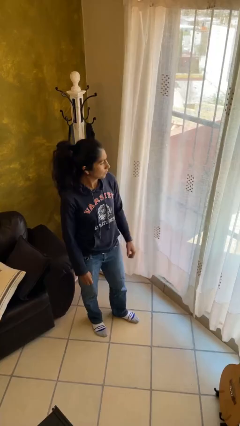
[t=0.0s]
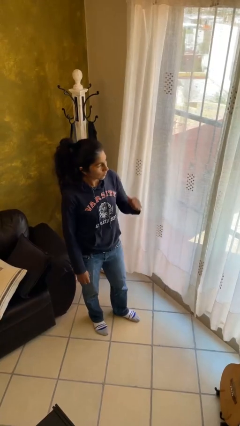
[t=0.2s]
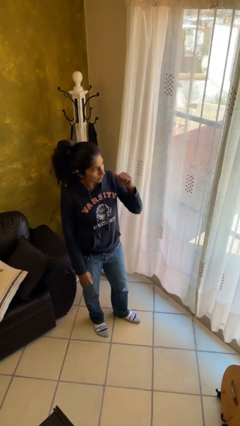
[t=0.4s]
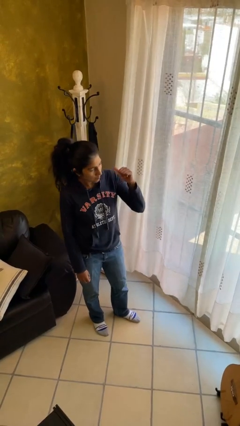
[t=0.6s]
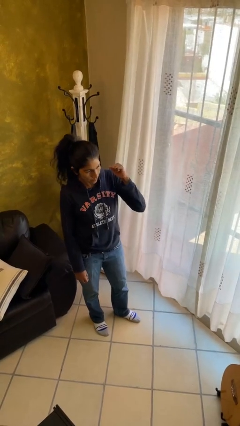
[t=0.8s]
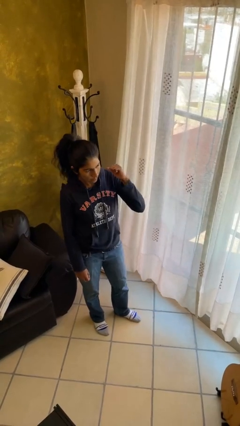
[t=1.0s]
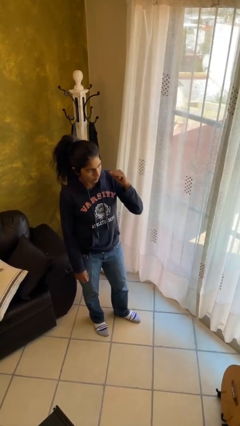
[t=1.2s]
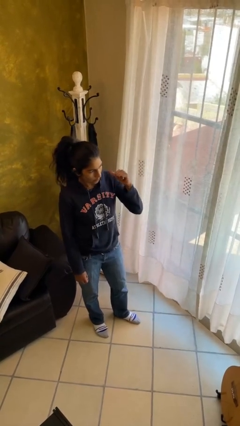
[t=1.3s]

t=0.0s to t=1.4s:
person gestures behind me

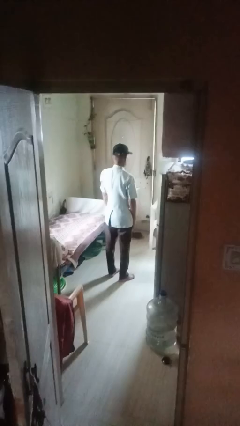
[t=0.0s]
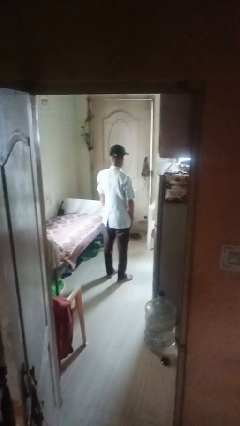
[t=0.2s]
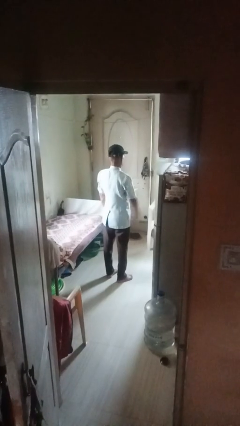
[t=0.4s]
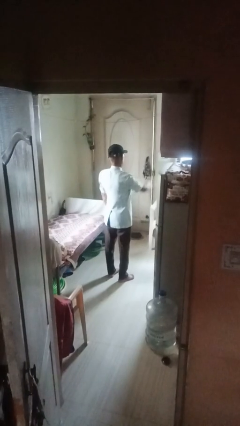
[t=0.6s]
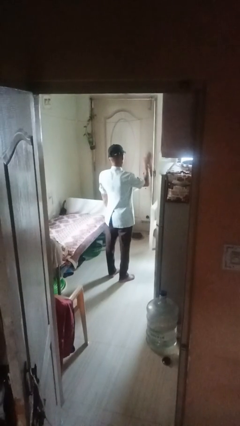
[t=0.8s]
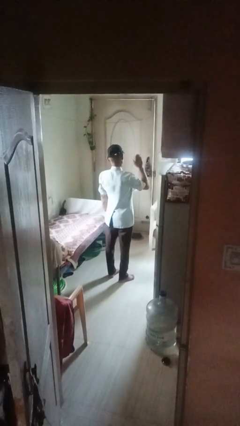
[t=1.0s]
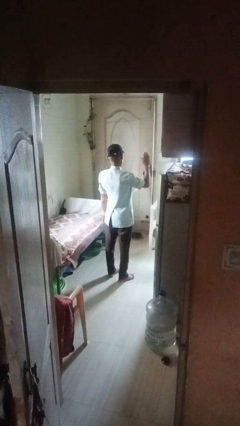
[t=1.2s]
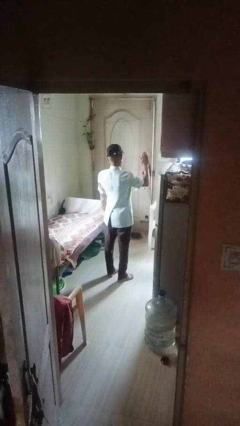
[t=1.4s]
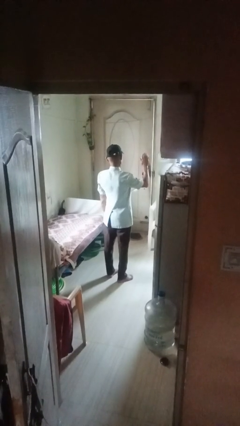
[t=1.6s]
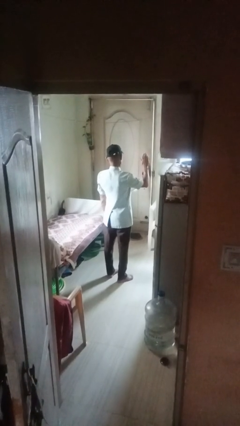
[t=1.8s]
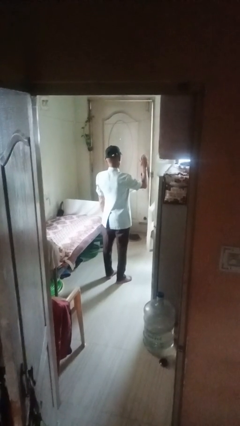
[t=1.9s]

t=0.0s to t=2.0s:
person gestures stop

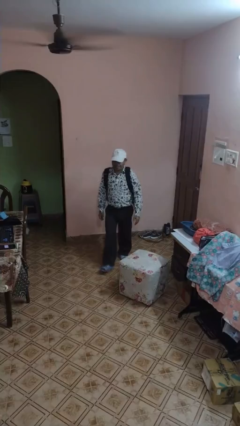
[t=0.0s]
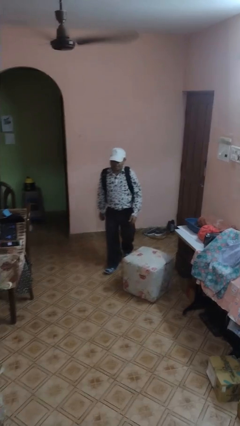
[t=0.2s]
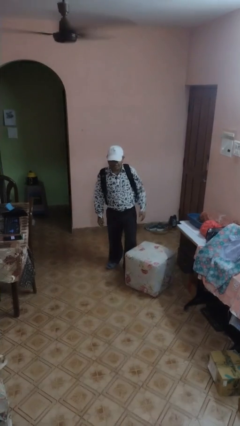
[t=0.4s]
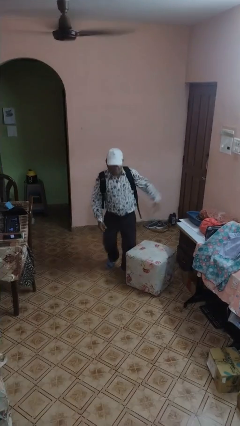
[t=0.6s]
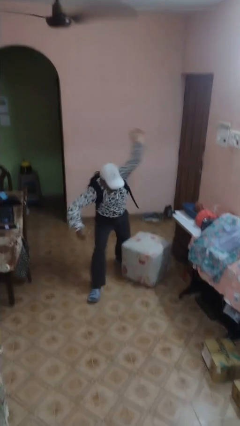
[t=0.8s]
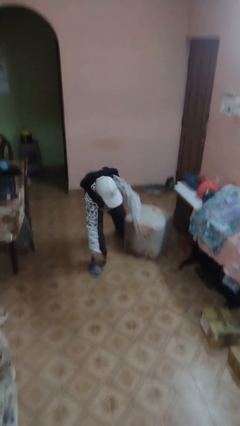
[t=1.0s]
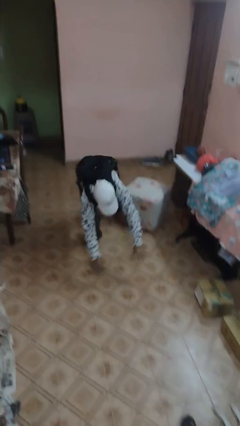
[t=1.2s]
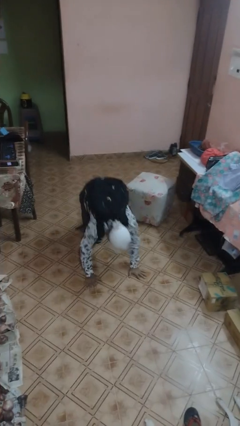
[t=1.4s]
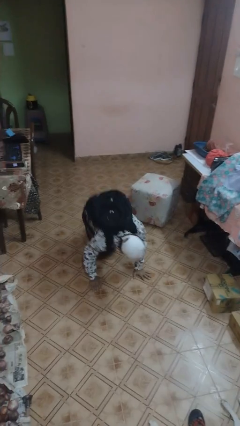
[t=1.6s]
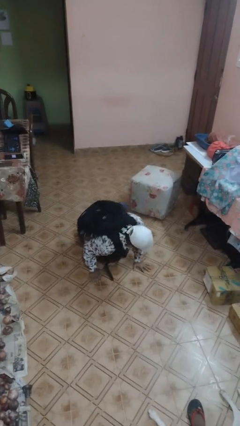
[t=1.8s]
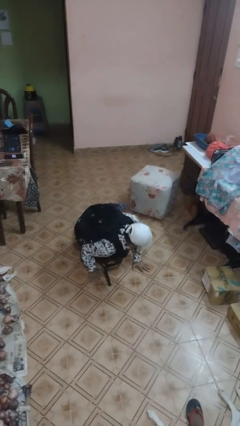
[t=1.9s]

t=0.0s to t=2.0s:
person trips on object on floor

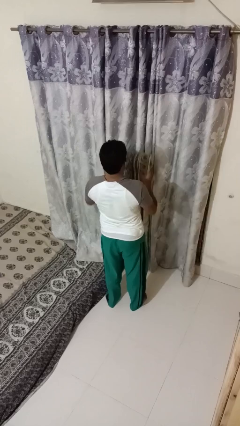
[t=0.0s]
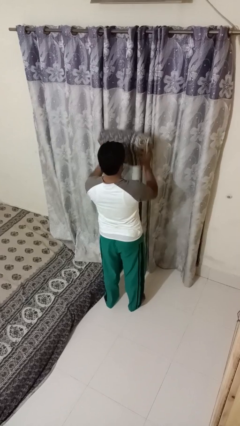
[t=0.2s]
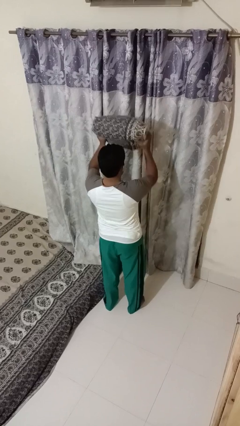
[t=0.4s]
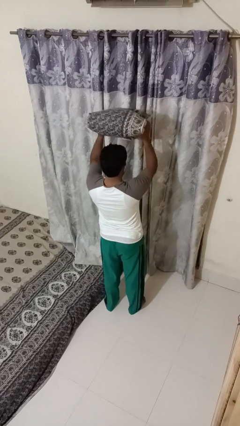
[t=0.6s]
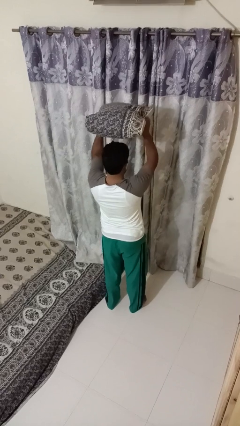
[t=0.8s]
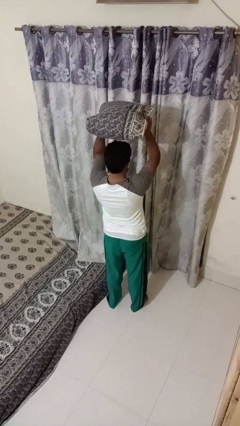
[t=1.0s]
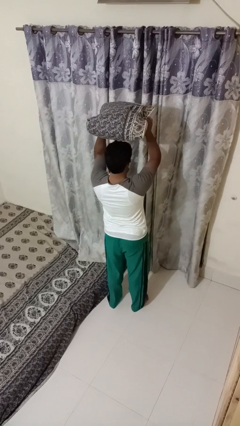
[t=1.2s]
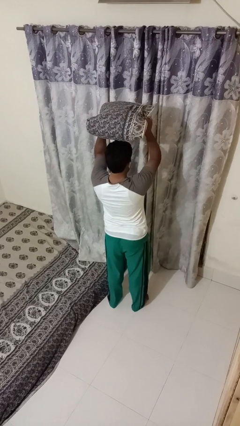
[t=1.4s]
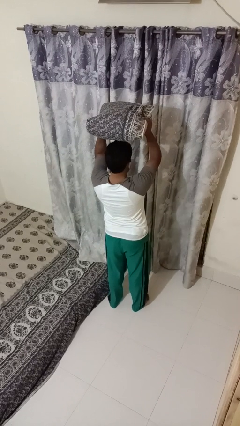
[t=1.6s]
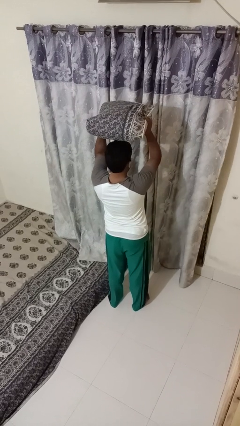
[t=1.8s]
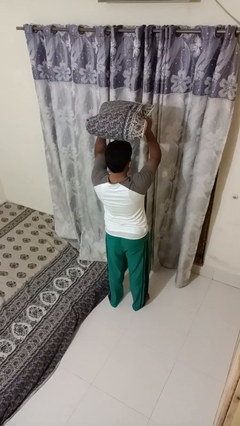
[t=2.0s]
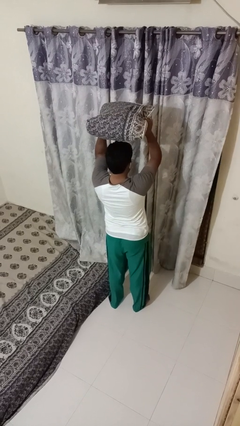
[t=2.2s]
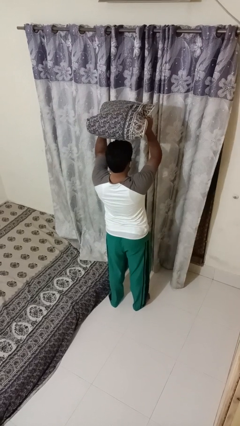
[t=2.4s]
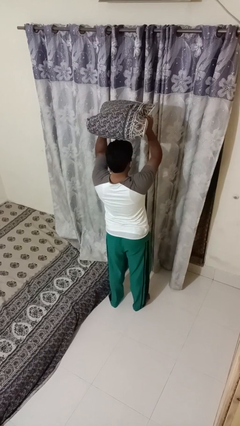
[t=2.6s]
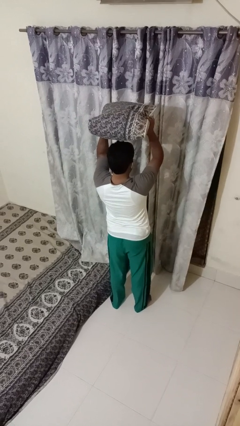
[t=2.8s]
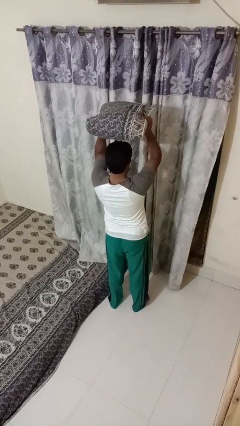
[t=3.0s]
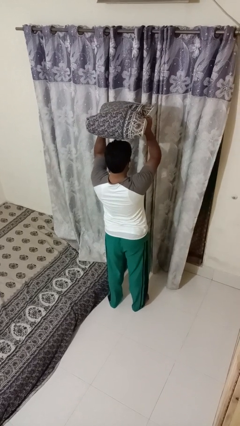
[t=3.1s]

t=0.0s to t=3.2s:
person holds object above head

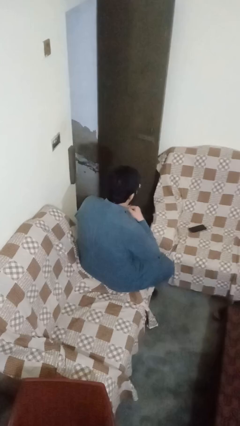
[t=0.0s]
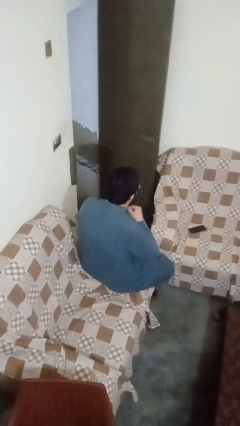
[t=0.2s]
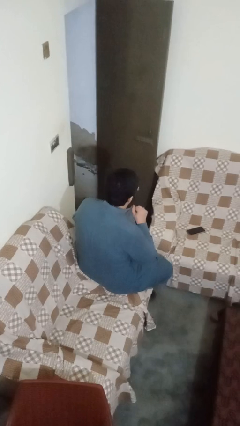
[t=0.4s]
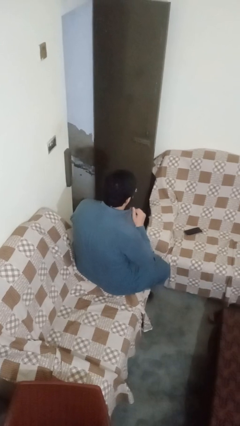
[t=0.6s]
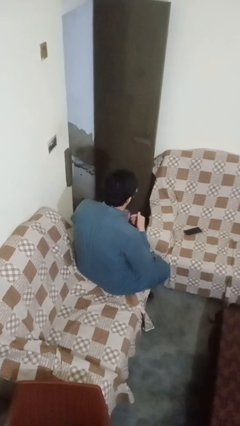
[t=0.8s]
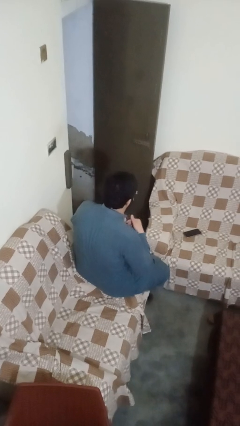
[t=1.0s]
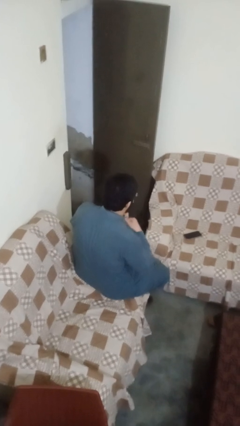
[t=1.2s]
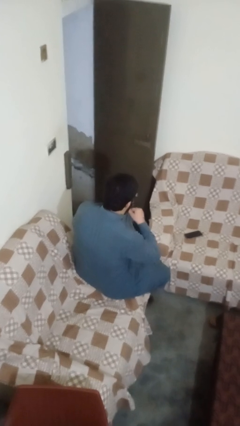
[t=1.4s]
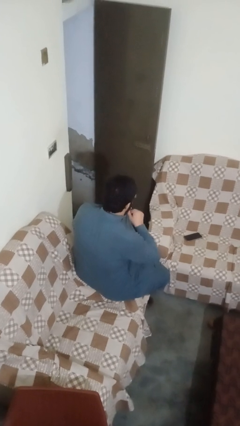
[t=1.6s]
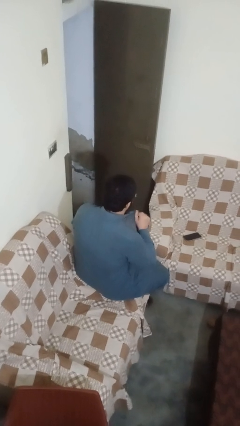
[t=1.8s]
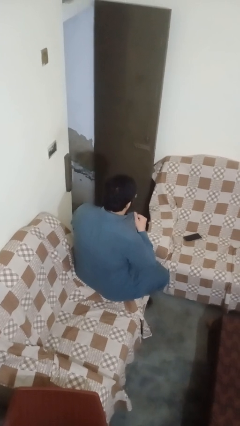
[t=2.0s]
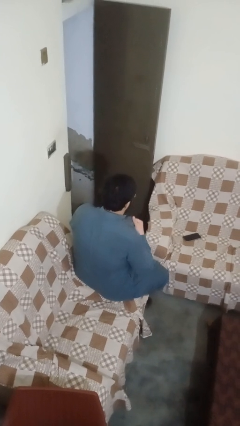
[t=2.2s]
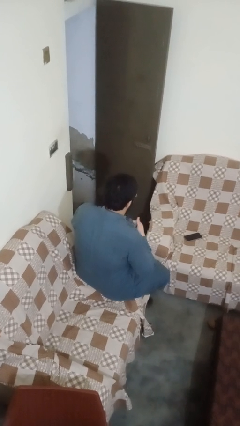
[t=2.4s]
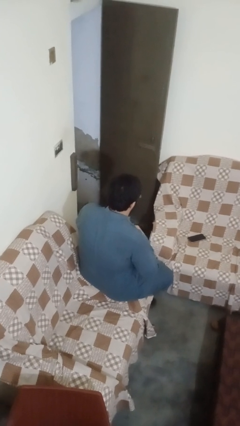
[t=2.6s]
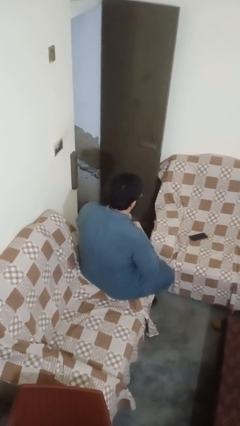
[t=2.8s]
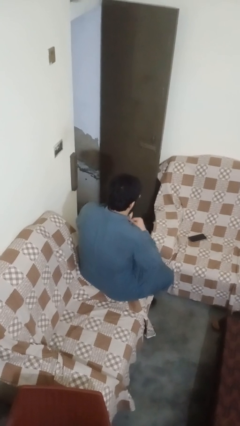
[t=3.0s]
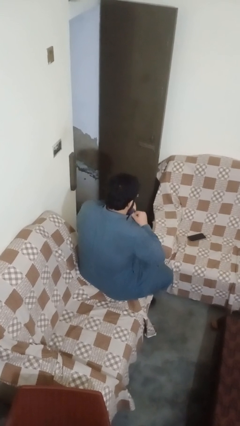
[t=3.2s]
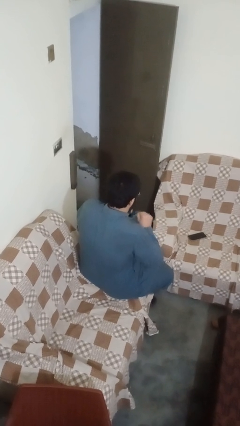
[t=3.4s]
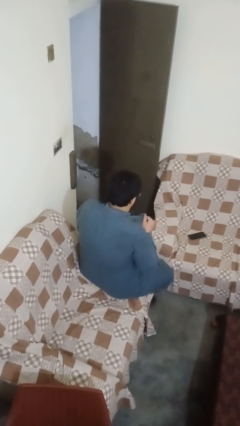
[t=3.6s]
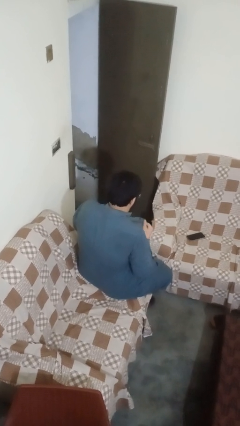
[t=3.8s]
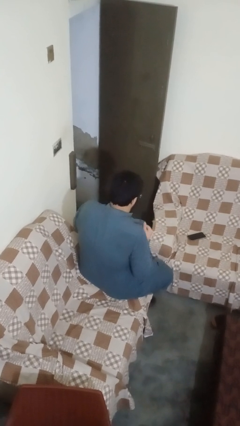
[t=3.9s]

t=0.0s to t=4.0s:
person unbuttons shirt

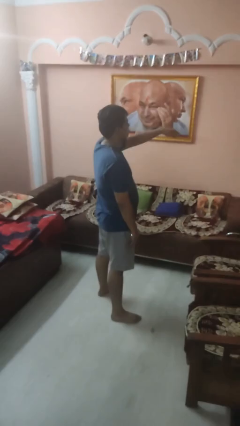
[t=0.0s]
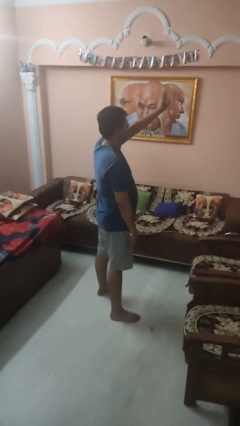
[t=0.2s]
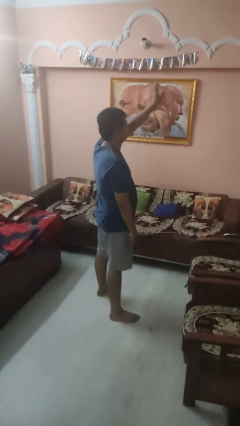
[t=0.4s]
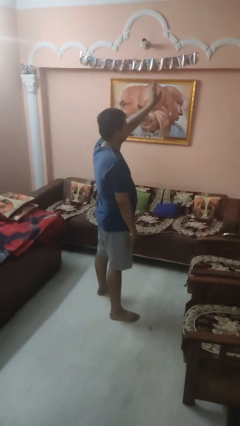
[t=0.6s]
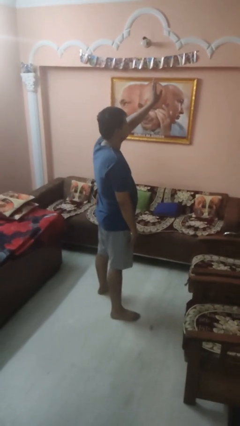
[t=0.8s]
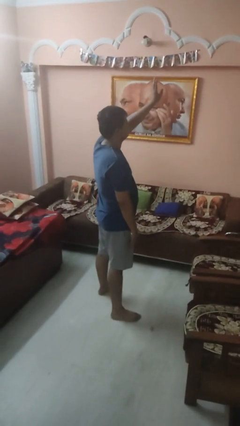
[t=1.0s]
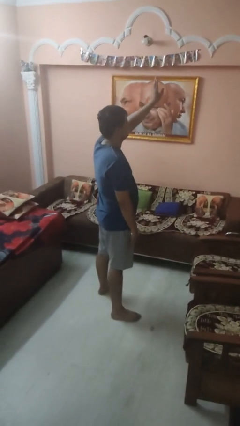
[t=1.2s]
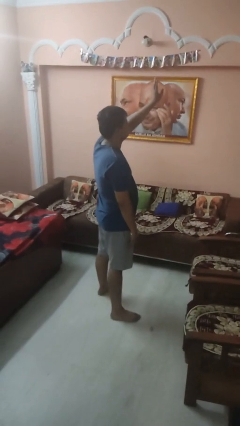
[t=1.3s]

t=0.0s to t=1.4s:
person gestures swipe up

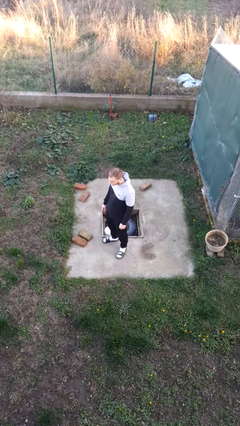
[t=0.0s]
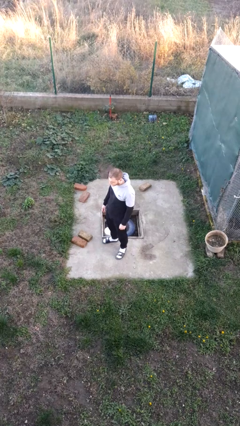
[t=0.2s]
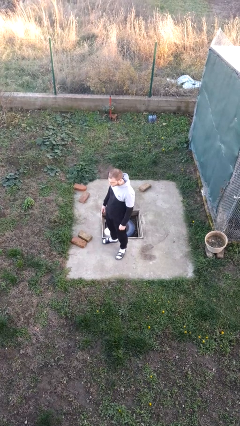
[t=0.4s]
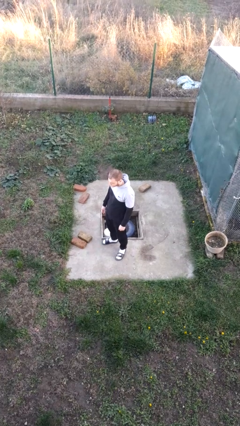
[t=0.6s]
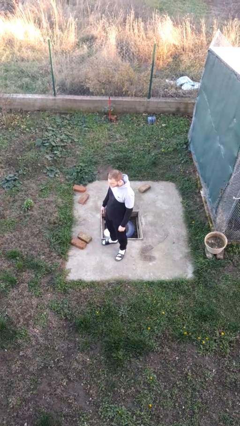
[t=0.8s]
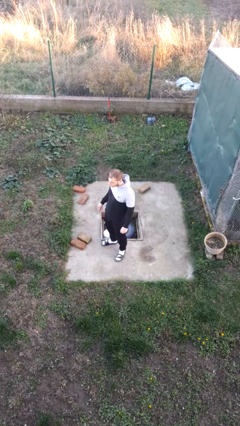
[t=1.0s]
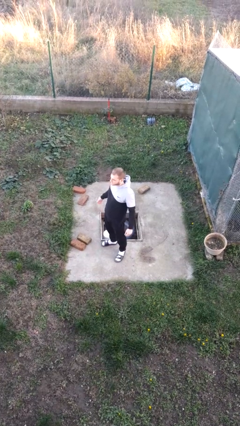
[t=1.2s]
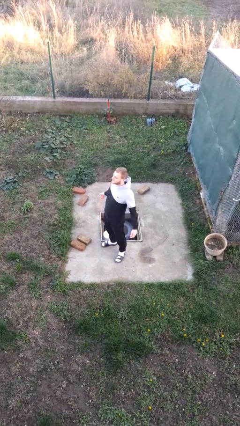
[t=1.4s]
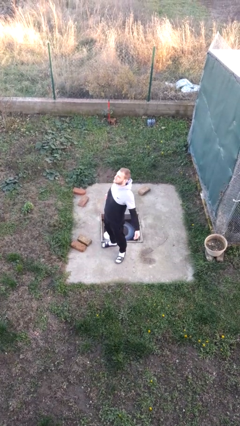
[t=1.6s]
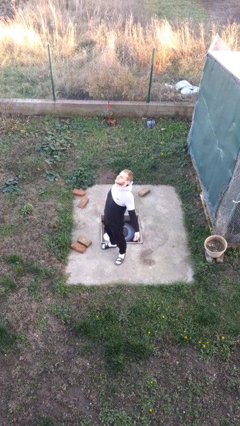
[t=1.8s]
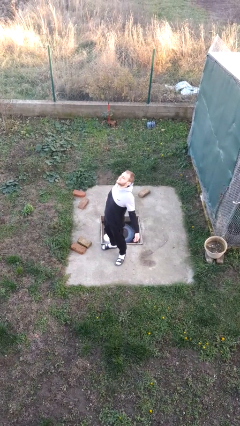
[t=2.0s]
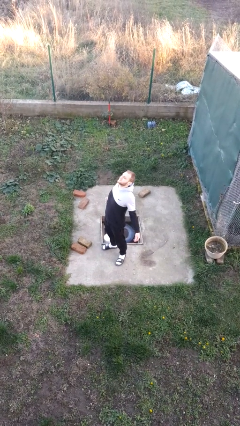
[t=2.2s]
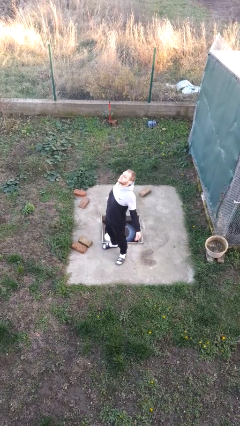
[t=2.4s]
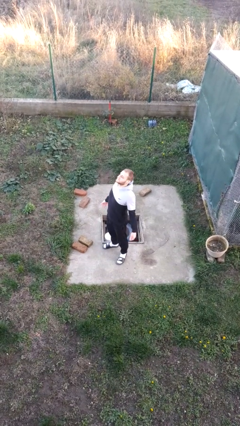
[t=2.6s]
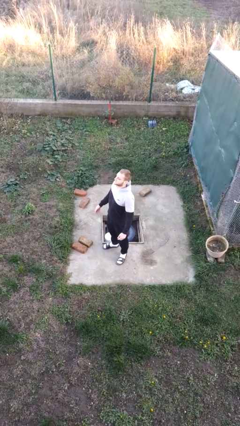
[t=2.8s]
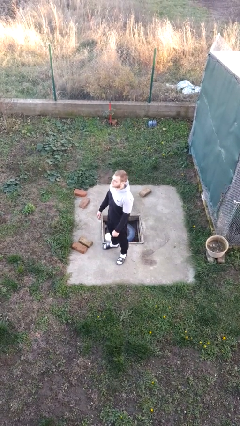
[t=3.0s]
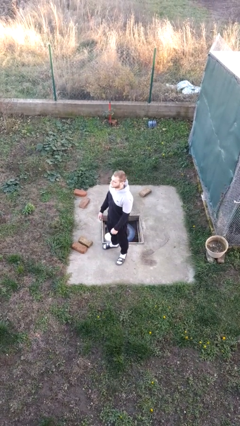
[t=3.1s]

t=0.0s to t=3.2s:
person stretches back
